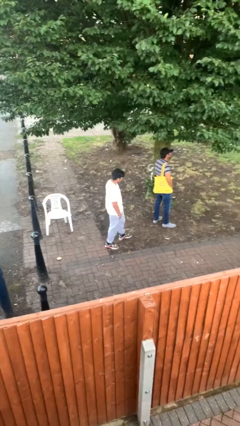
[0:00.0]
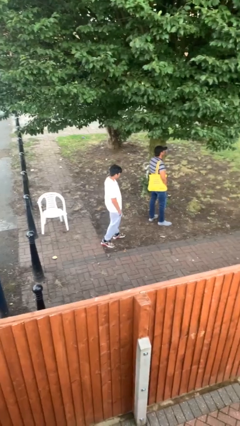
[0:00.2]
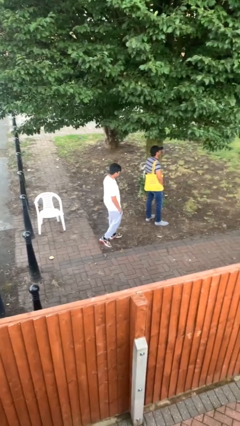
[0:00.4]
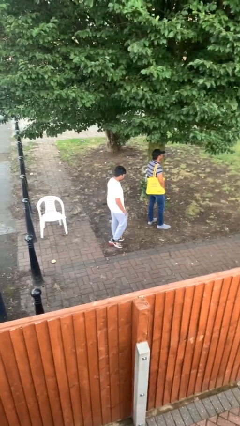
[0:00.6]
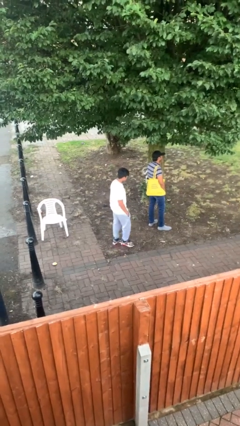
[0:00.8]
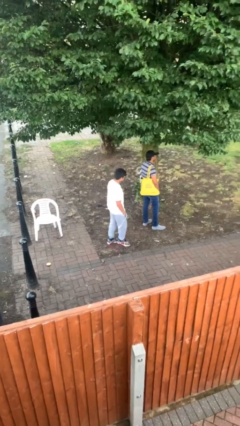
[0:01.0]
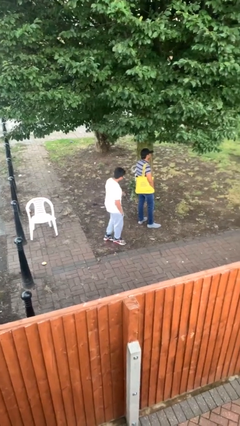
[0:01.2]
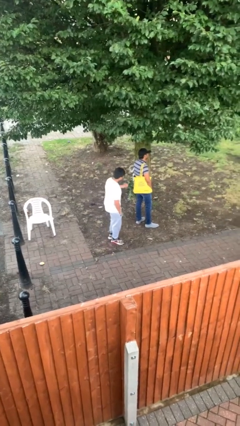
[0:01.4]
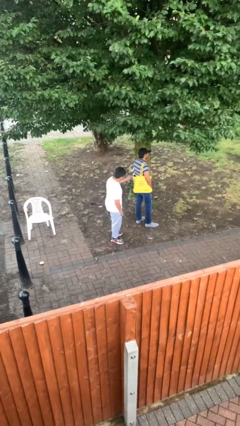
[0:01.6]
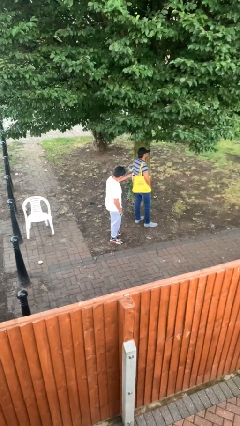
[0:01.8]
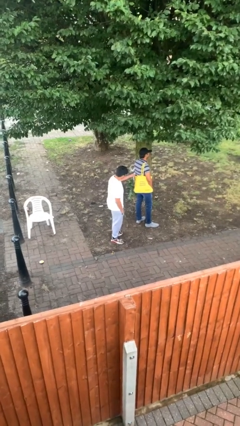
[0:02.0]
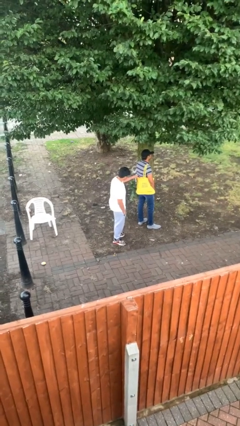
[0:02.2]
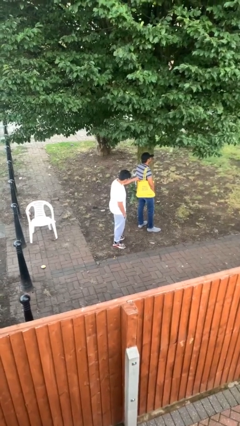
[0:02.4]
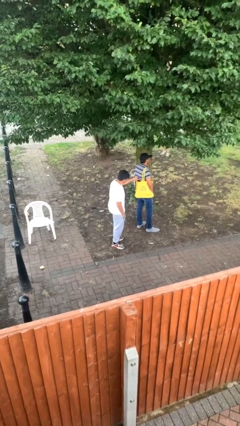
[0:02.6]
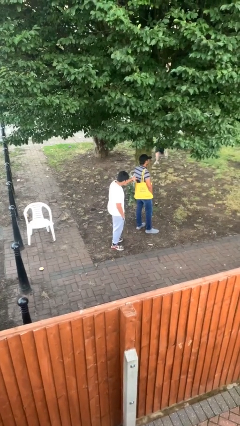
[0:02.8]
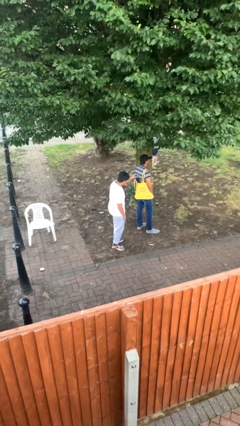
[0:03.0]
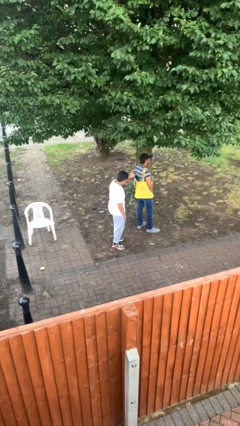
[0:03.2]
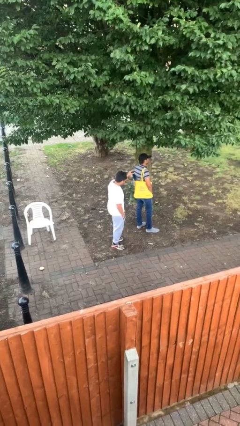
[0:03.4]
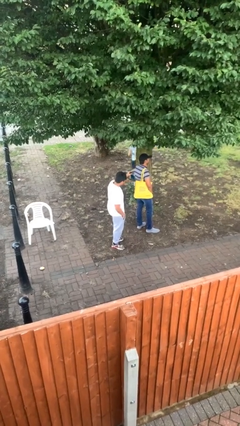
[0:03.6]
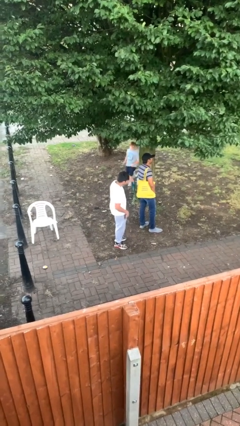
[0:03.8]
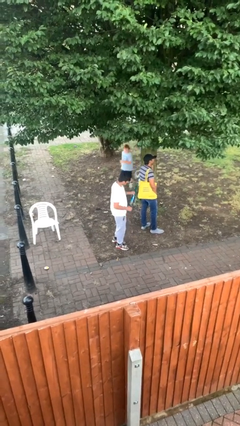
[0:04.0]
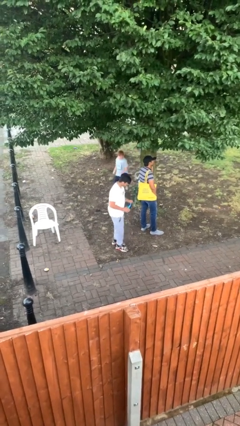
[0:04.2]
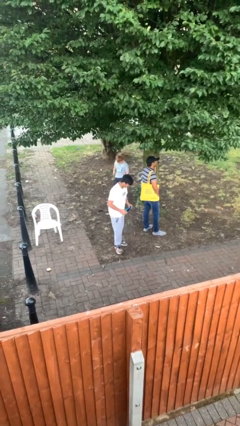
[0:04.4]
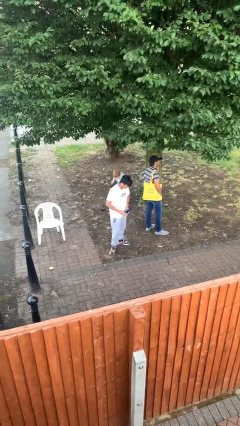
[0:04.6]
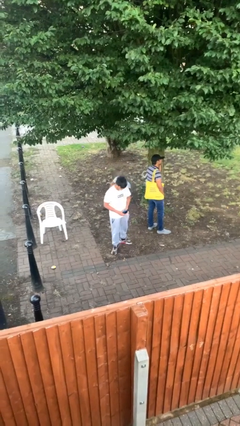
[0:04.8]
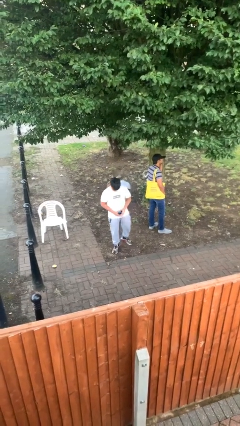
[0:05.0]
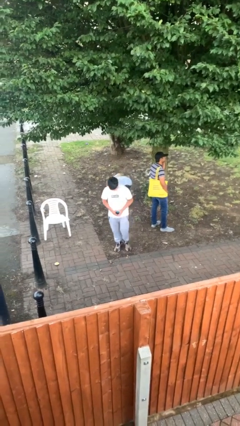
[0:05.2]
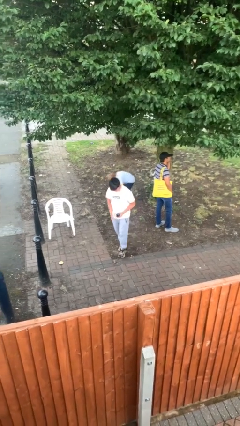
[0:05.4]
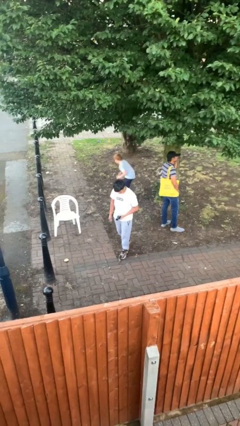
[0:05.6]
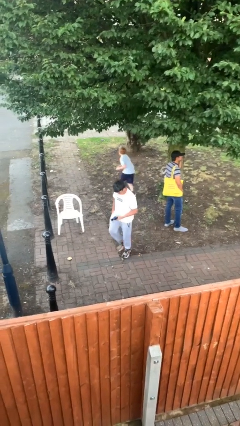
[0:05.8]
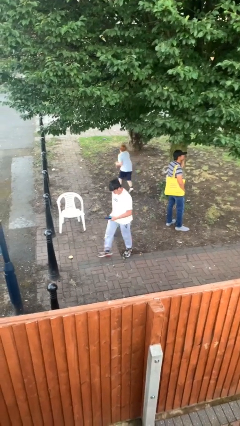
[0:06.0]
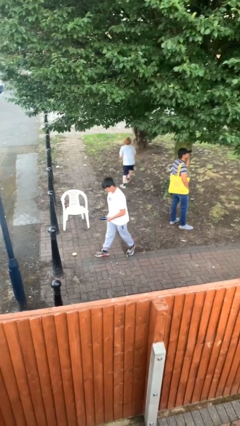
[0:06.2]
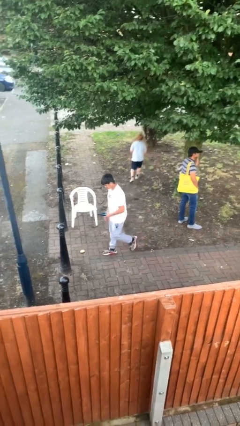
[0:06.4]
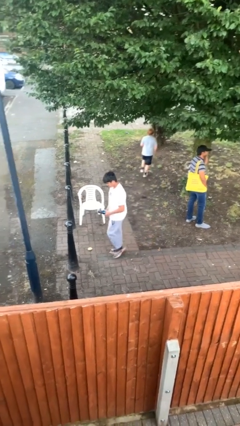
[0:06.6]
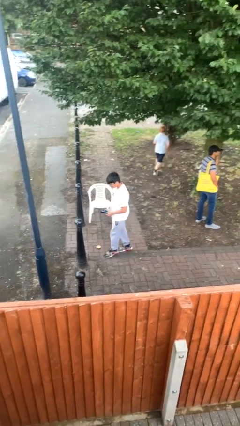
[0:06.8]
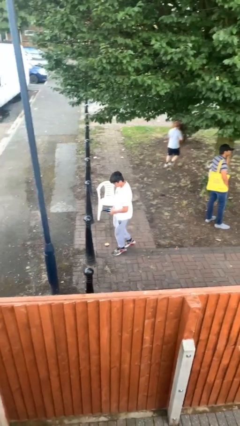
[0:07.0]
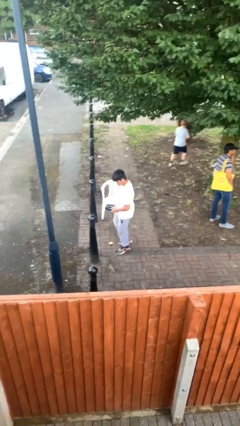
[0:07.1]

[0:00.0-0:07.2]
person steals object from person

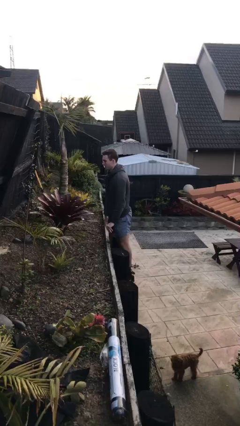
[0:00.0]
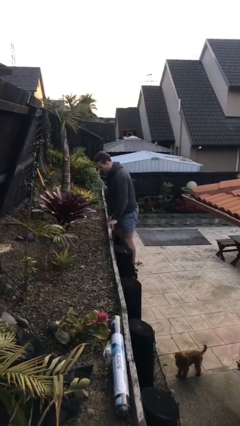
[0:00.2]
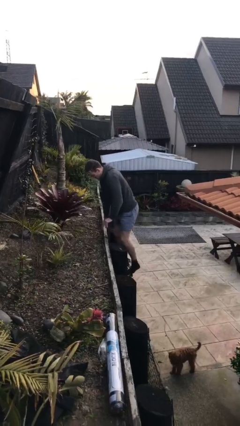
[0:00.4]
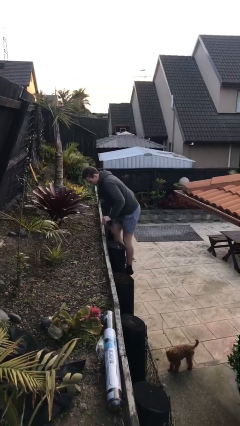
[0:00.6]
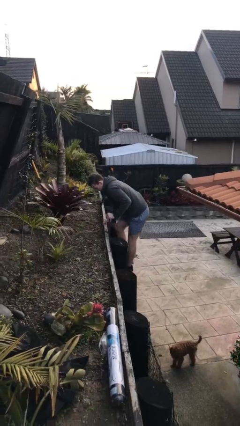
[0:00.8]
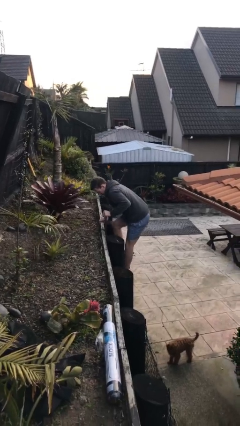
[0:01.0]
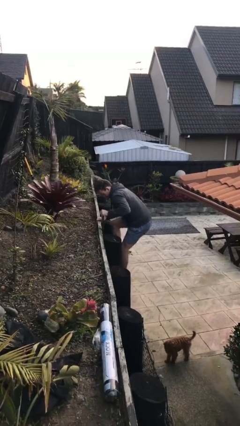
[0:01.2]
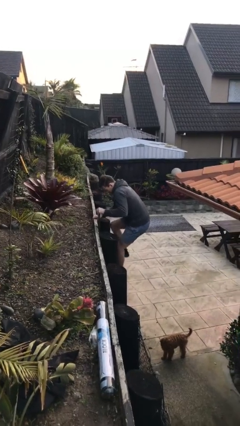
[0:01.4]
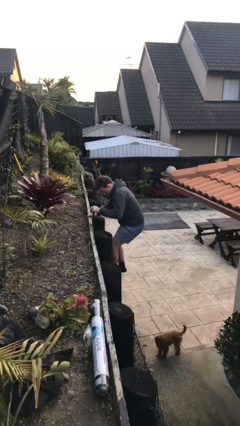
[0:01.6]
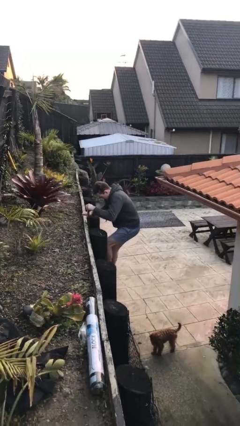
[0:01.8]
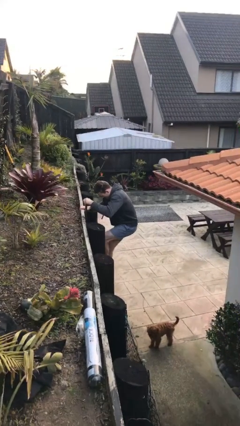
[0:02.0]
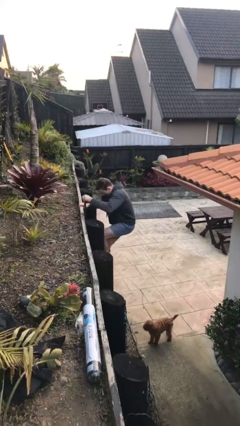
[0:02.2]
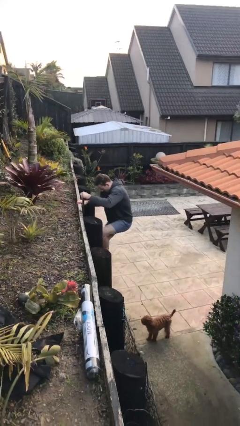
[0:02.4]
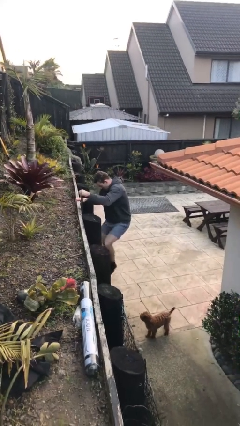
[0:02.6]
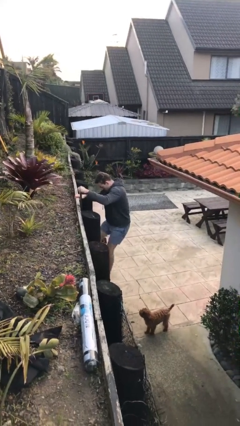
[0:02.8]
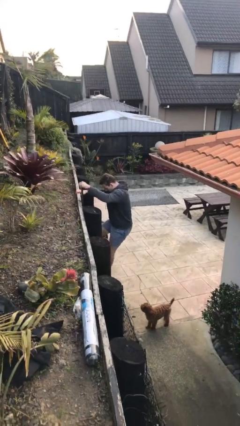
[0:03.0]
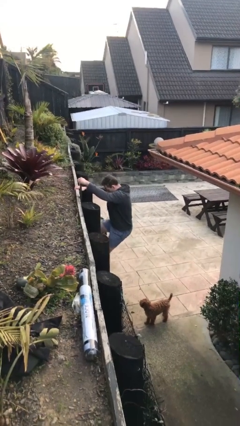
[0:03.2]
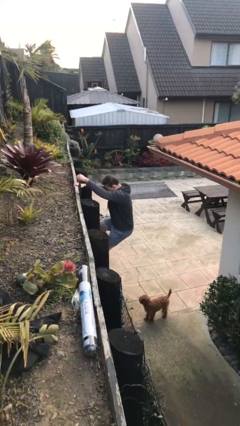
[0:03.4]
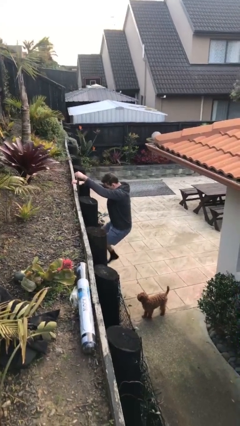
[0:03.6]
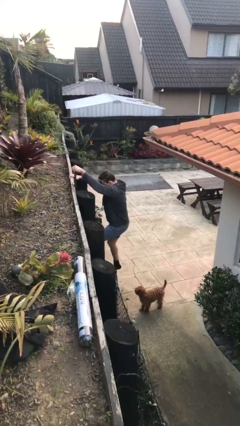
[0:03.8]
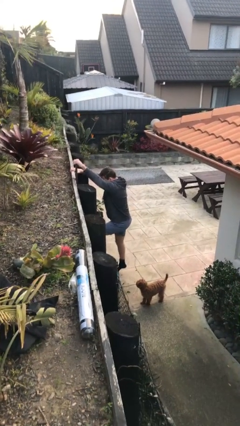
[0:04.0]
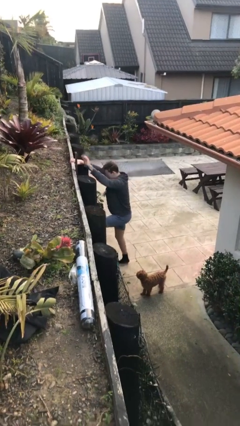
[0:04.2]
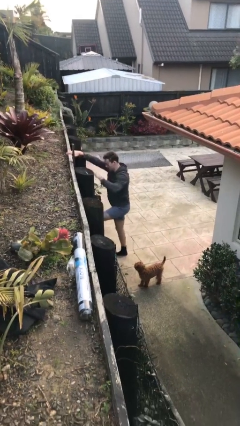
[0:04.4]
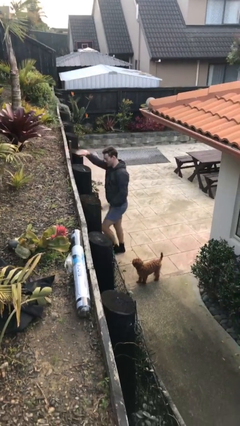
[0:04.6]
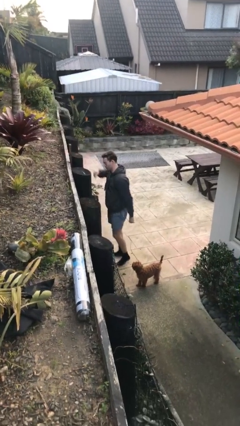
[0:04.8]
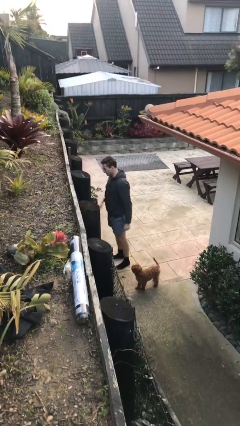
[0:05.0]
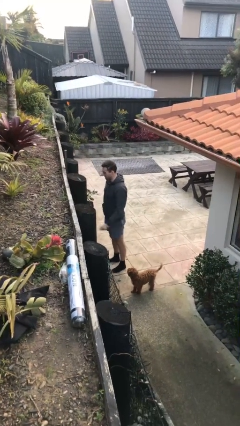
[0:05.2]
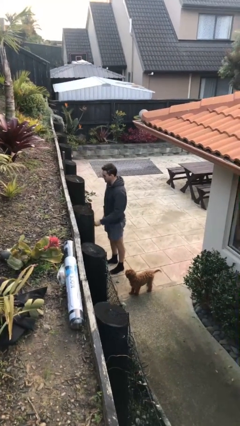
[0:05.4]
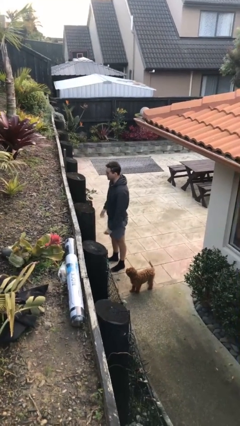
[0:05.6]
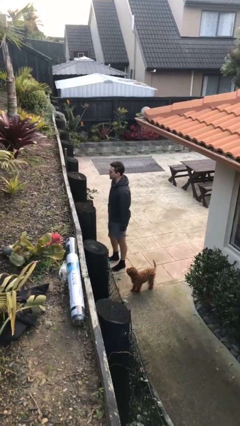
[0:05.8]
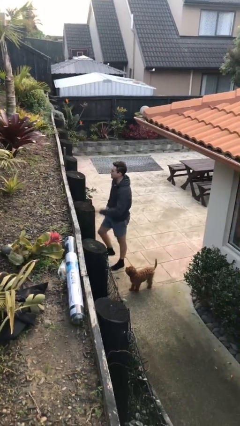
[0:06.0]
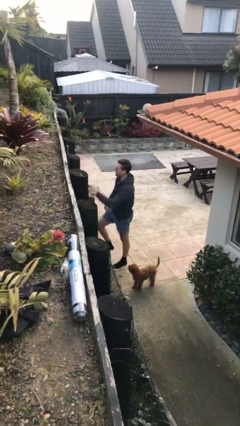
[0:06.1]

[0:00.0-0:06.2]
person climbs down ladder

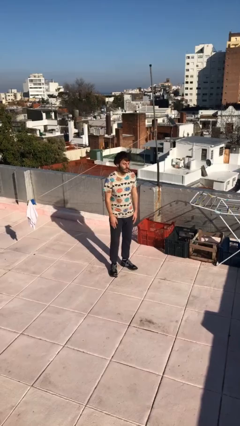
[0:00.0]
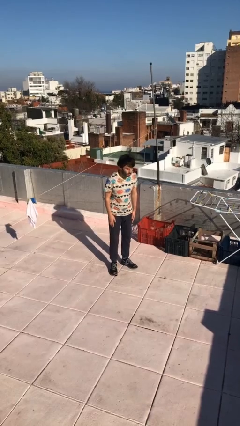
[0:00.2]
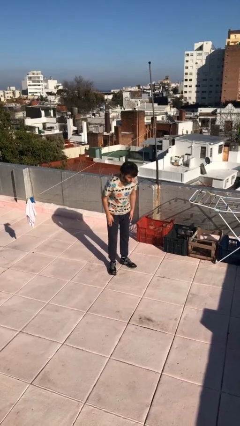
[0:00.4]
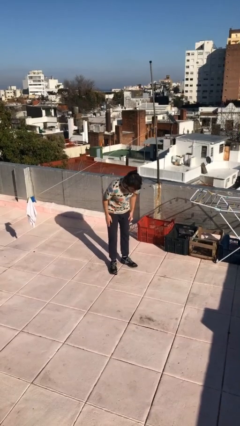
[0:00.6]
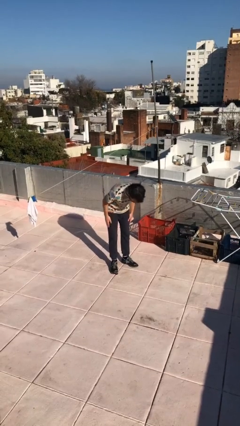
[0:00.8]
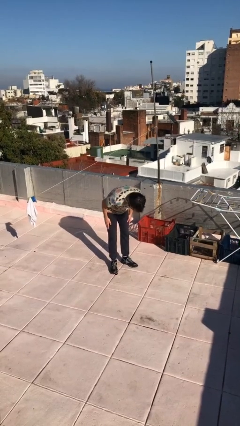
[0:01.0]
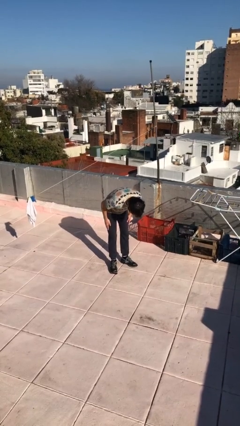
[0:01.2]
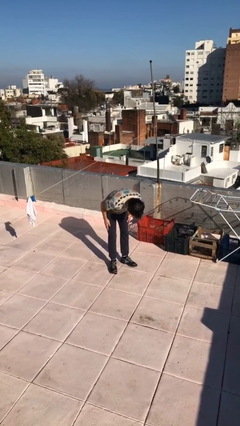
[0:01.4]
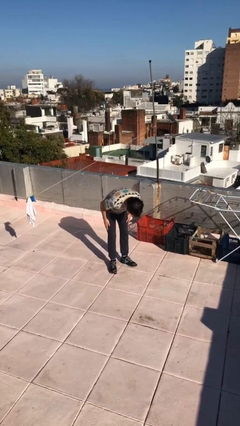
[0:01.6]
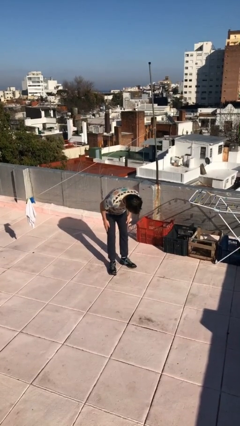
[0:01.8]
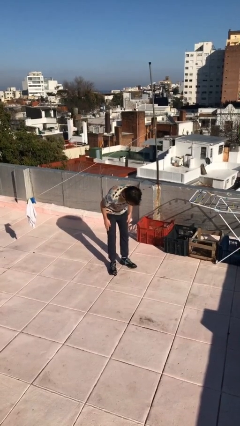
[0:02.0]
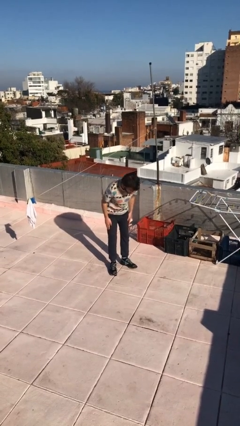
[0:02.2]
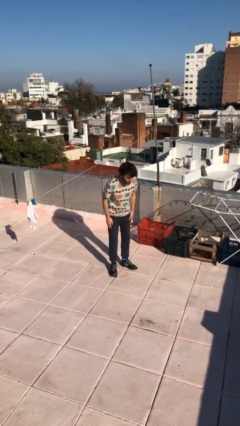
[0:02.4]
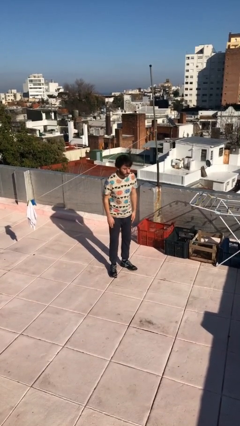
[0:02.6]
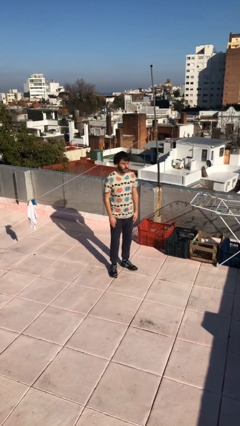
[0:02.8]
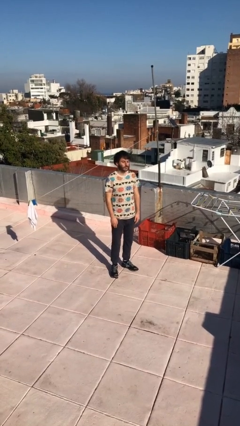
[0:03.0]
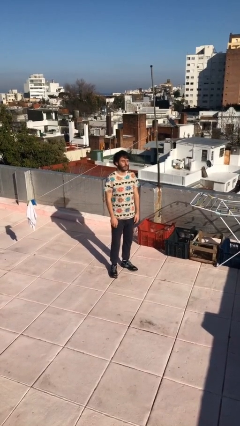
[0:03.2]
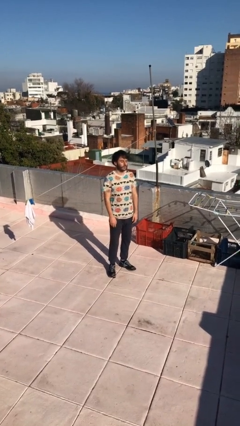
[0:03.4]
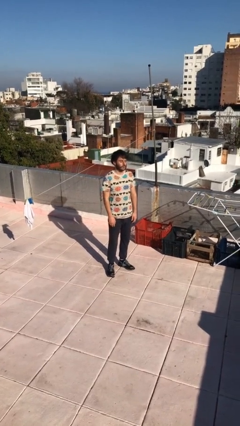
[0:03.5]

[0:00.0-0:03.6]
person bows

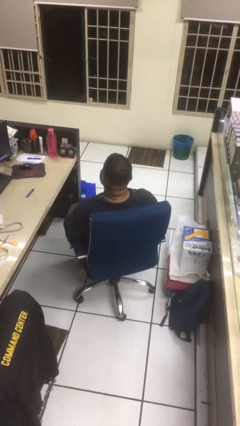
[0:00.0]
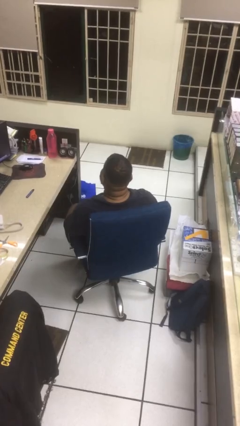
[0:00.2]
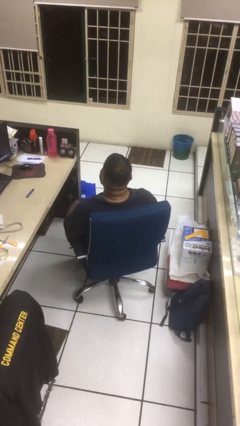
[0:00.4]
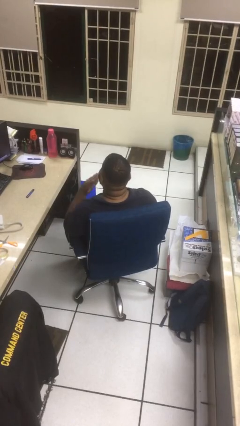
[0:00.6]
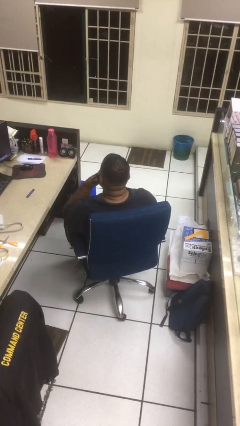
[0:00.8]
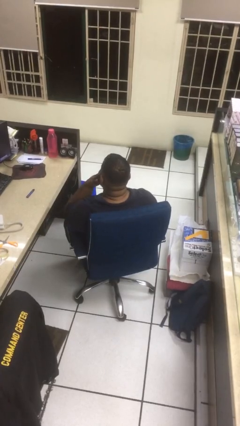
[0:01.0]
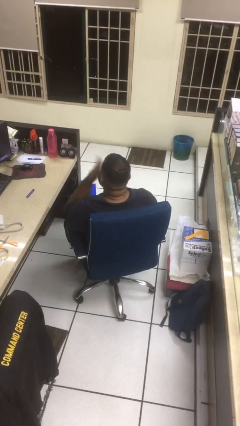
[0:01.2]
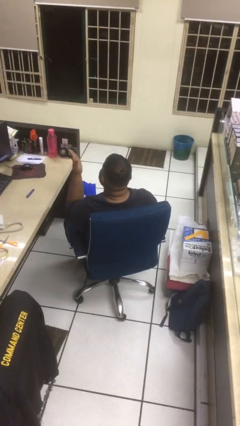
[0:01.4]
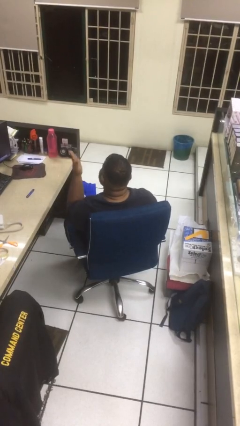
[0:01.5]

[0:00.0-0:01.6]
person gestures blow kiss
